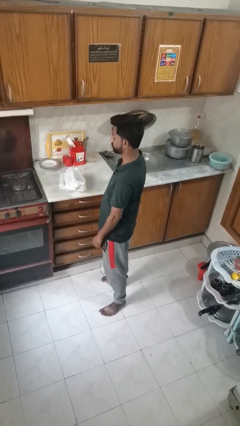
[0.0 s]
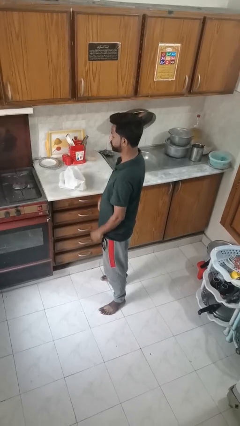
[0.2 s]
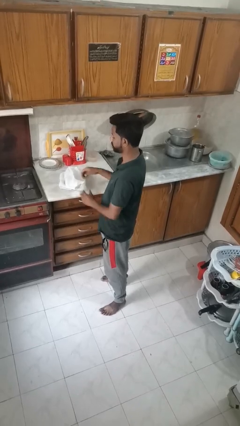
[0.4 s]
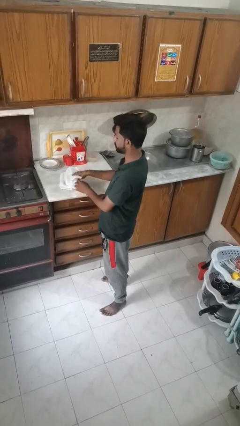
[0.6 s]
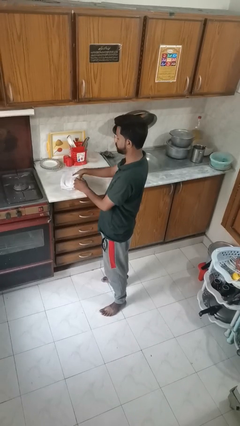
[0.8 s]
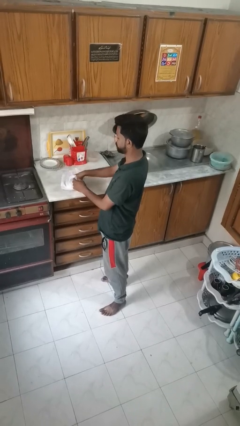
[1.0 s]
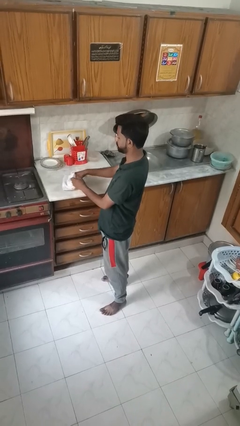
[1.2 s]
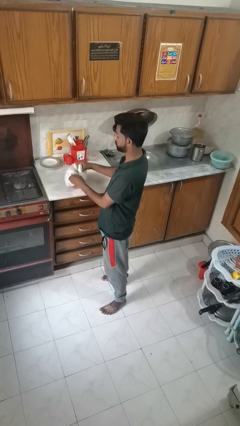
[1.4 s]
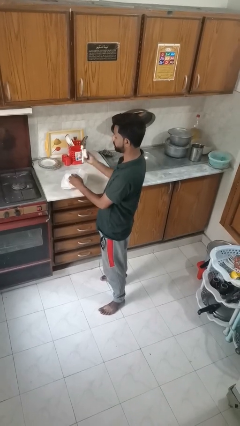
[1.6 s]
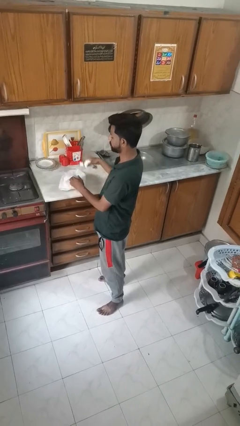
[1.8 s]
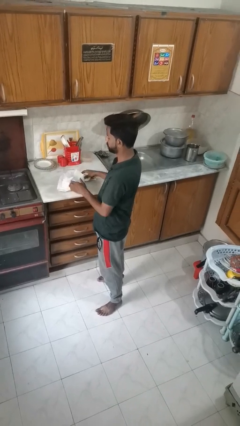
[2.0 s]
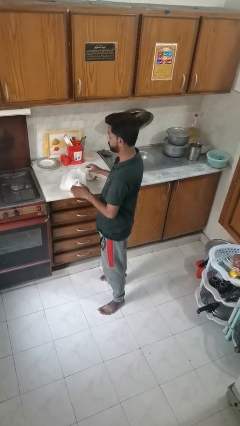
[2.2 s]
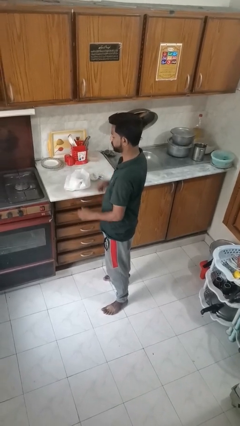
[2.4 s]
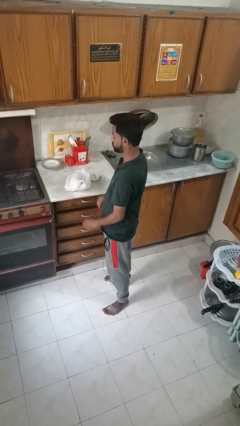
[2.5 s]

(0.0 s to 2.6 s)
person takes object from bag

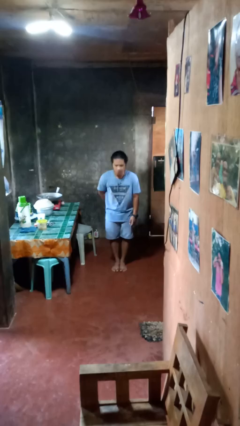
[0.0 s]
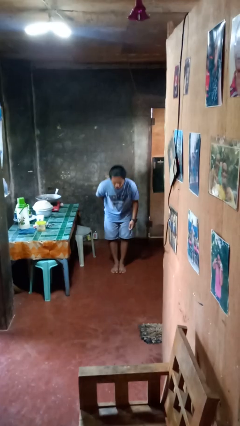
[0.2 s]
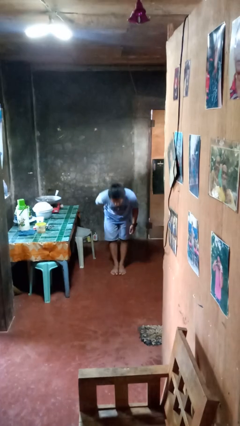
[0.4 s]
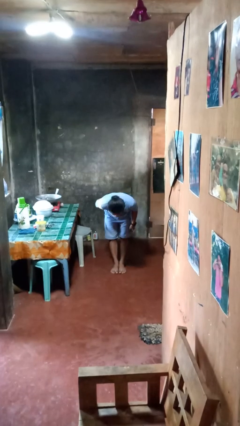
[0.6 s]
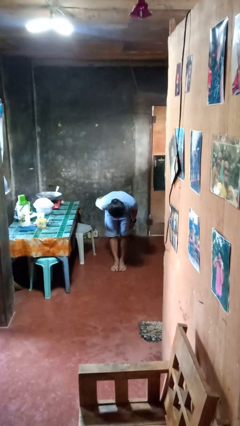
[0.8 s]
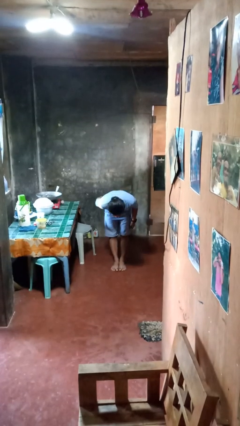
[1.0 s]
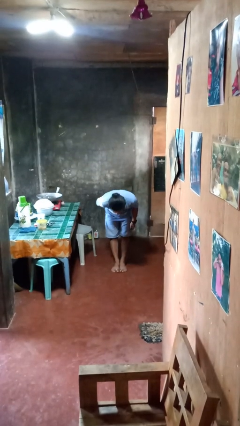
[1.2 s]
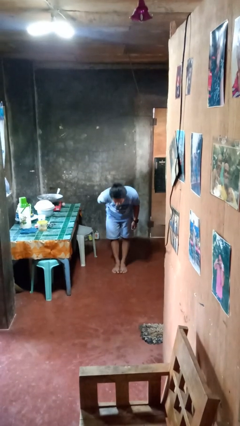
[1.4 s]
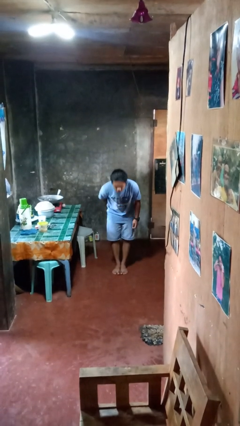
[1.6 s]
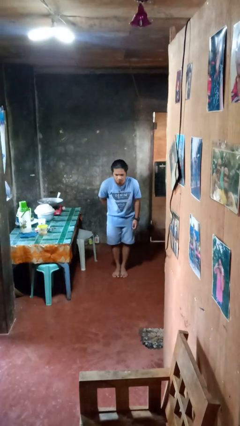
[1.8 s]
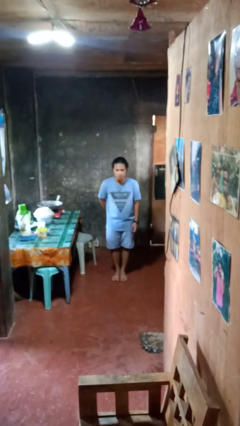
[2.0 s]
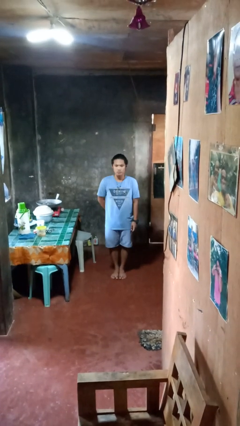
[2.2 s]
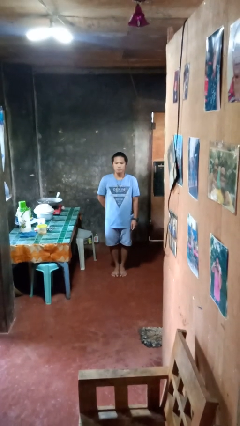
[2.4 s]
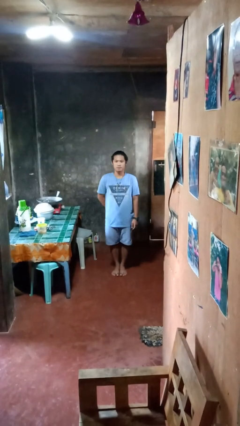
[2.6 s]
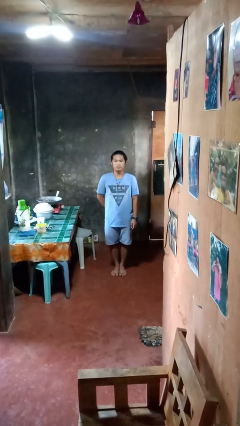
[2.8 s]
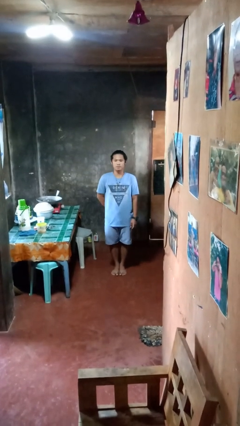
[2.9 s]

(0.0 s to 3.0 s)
person bows

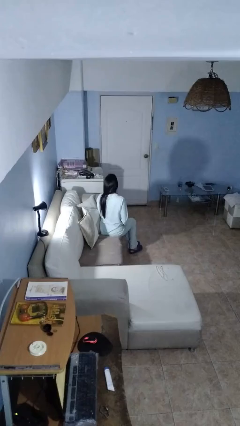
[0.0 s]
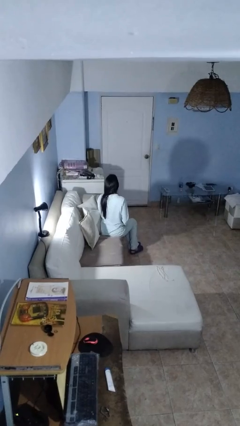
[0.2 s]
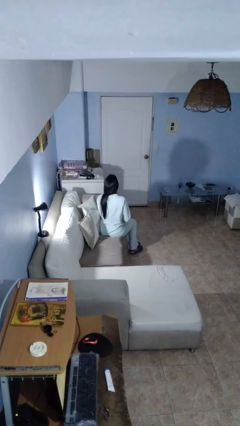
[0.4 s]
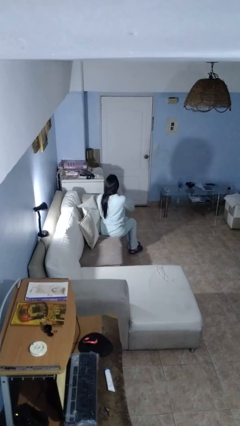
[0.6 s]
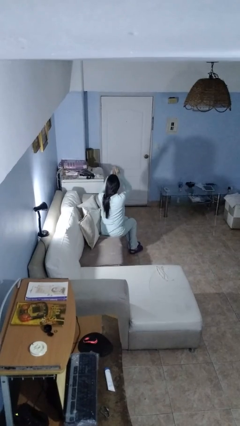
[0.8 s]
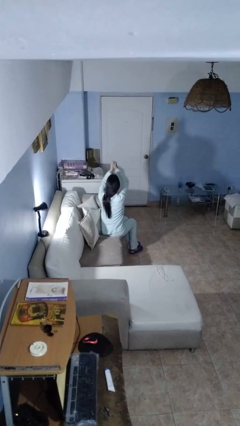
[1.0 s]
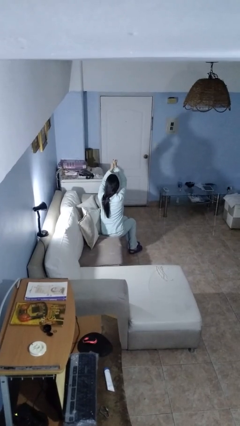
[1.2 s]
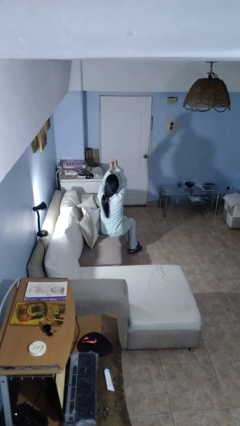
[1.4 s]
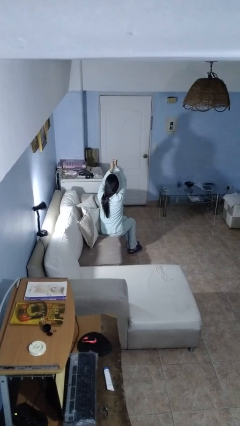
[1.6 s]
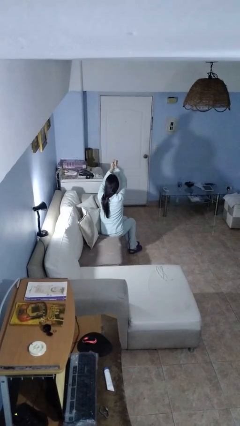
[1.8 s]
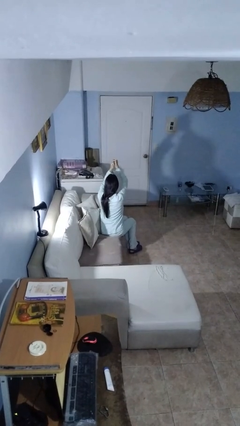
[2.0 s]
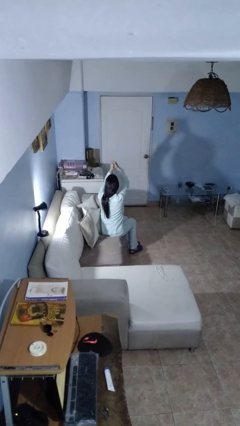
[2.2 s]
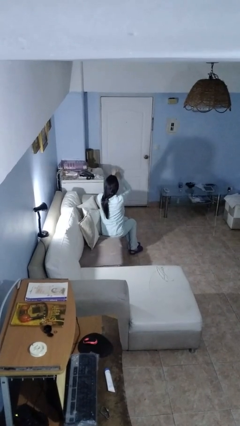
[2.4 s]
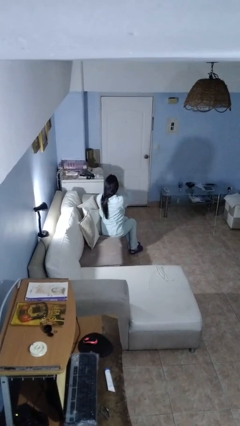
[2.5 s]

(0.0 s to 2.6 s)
person snaps fingers

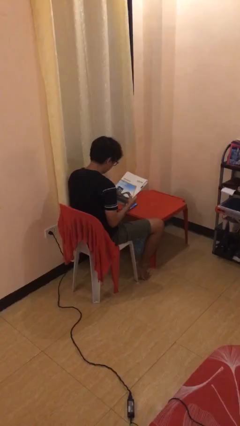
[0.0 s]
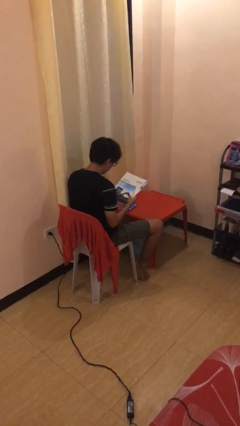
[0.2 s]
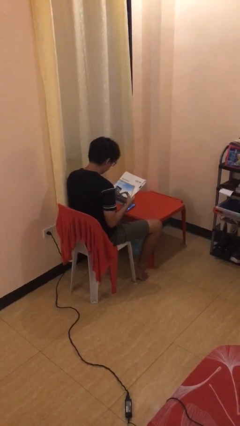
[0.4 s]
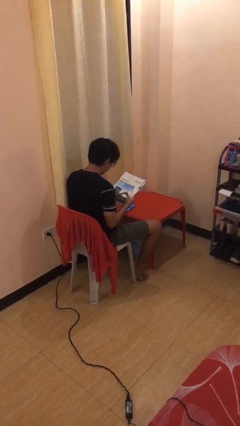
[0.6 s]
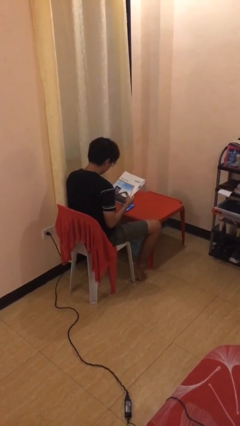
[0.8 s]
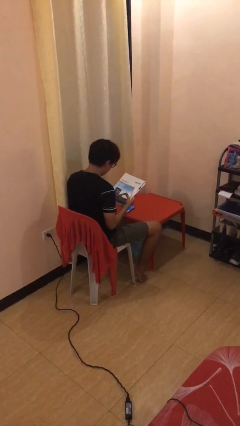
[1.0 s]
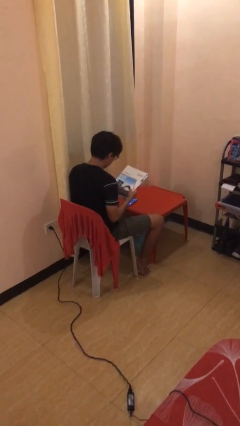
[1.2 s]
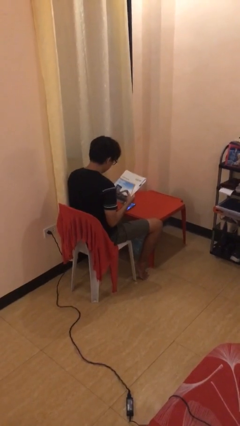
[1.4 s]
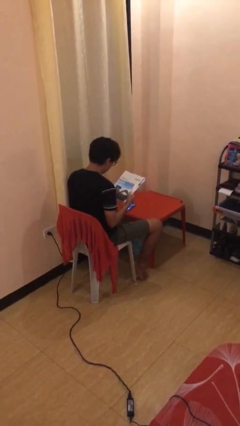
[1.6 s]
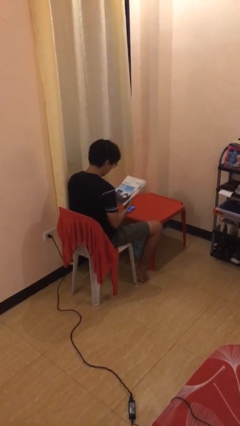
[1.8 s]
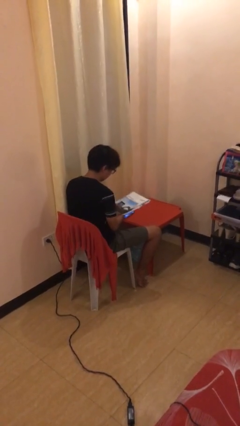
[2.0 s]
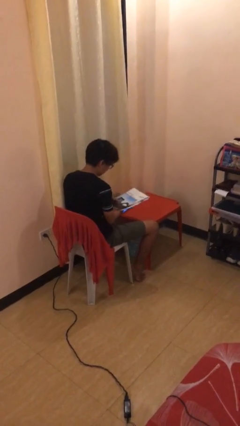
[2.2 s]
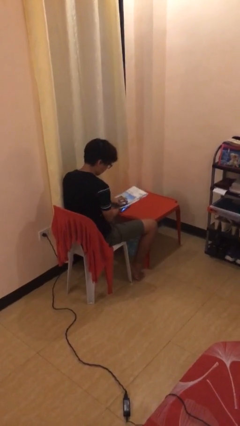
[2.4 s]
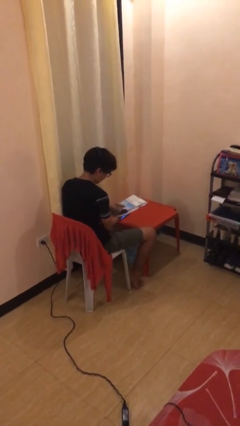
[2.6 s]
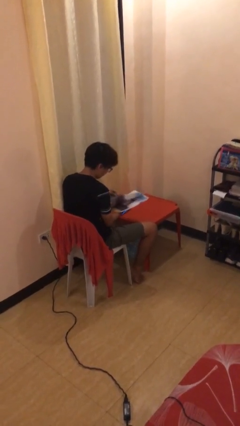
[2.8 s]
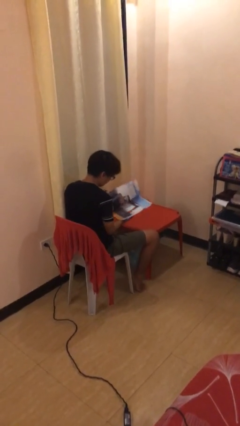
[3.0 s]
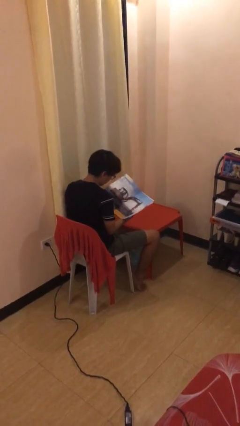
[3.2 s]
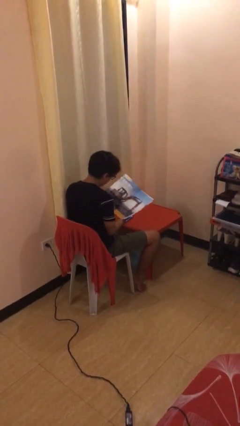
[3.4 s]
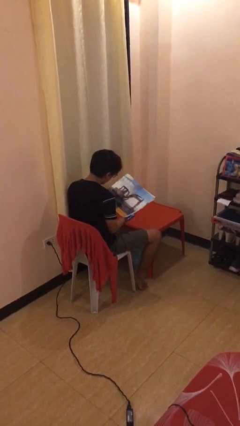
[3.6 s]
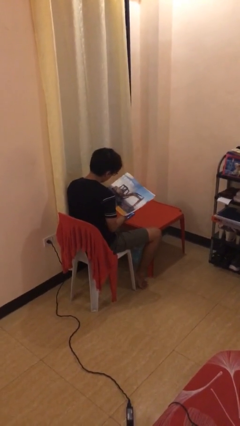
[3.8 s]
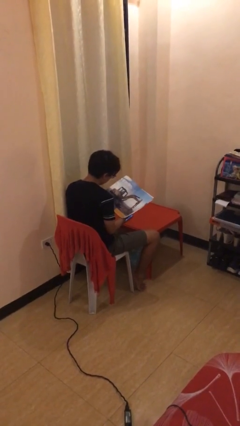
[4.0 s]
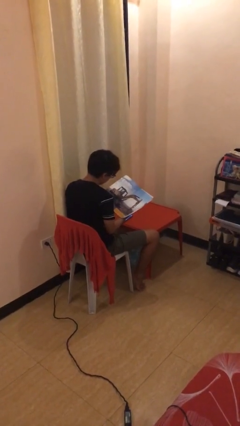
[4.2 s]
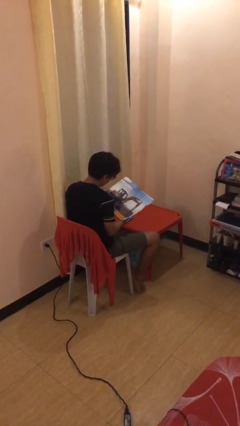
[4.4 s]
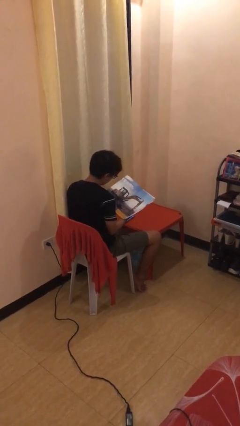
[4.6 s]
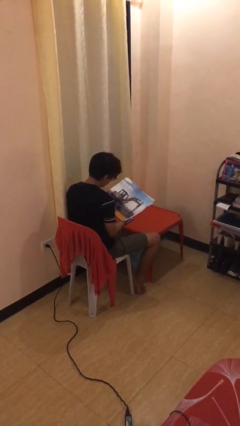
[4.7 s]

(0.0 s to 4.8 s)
person reads document

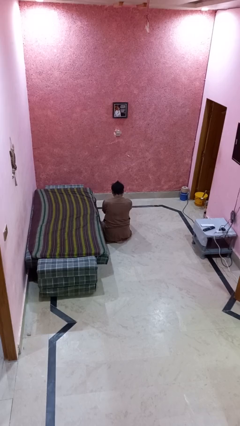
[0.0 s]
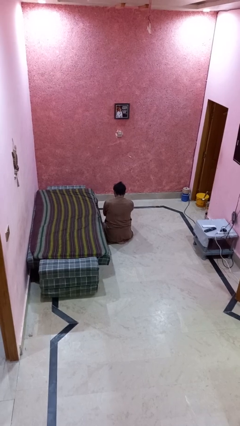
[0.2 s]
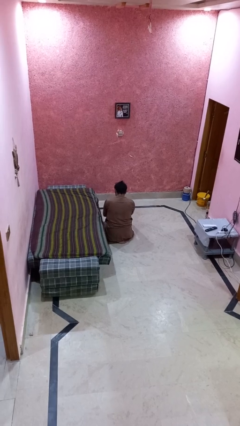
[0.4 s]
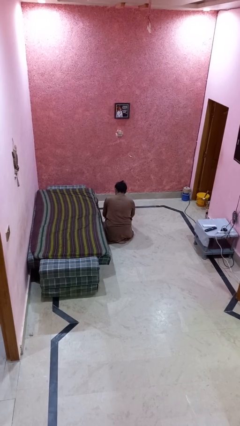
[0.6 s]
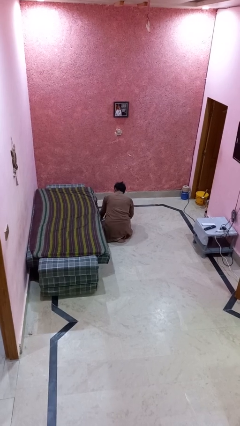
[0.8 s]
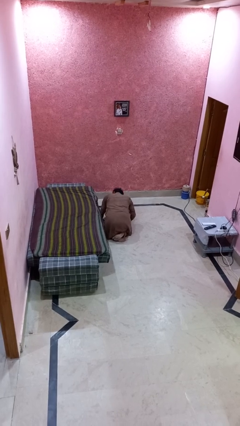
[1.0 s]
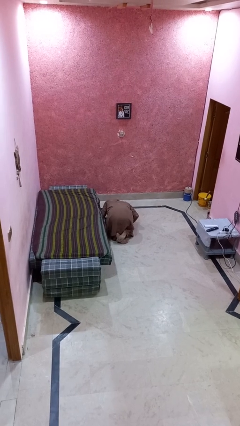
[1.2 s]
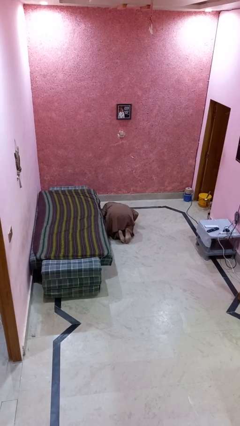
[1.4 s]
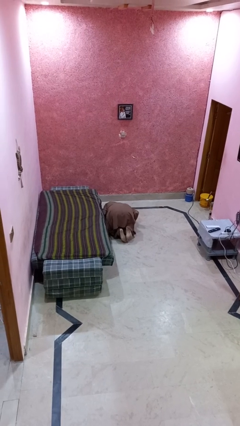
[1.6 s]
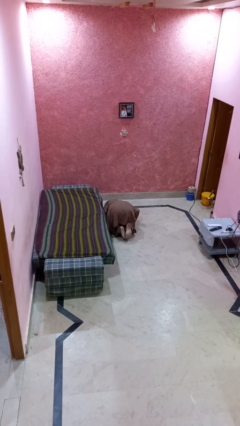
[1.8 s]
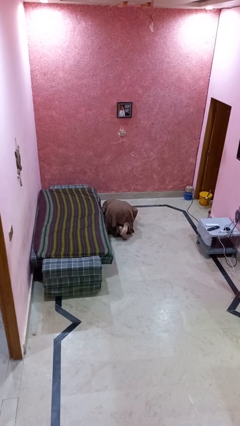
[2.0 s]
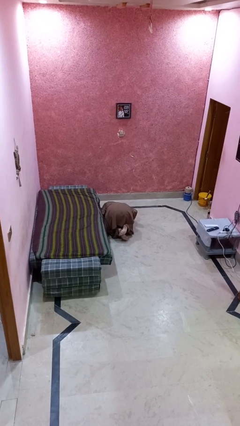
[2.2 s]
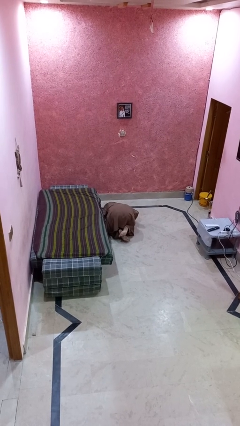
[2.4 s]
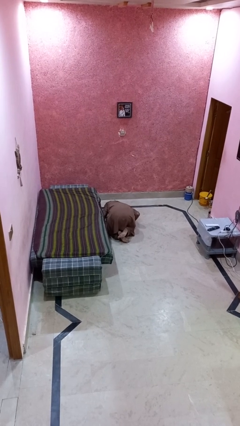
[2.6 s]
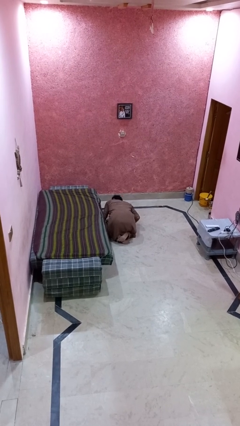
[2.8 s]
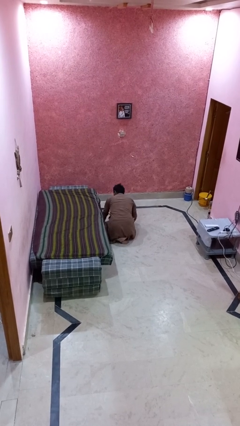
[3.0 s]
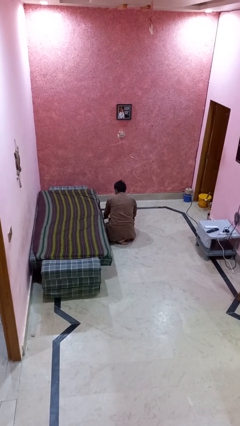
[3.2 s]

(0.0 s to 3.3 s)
person searches under bed

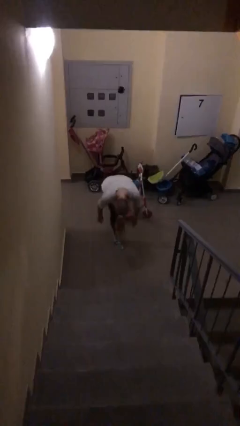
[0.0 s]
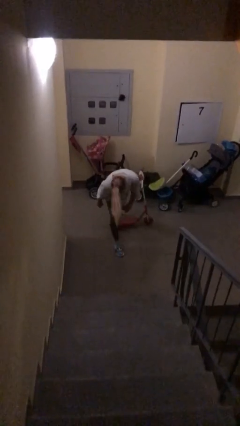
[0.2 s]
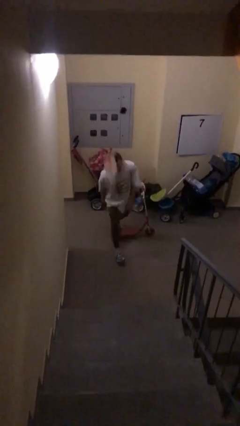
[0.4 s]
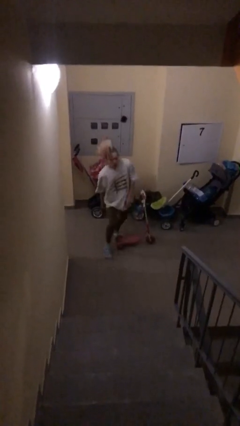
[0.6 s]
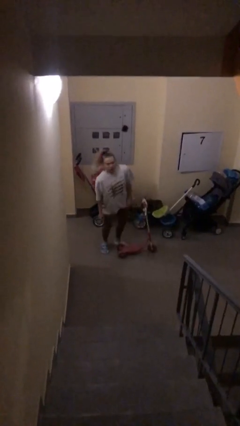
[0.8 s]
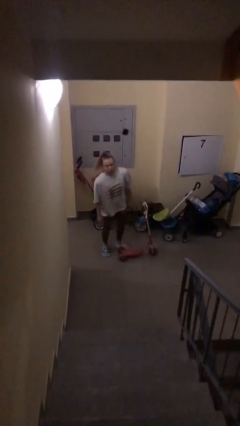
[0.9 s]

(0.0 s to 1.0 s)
person stands up from floor

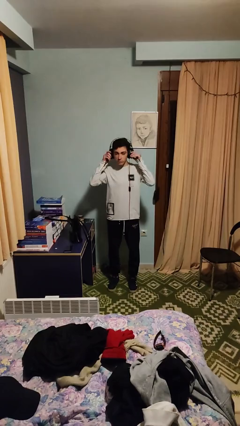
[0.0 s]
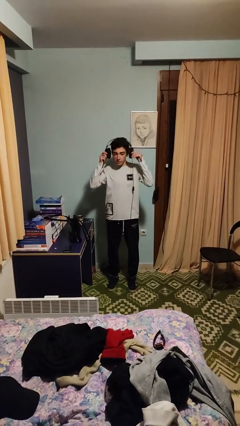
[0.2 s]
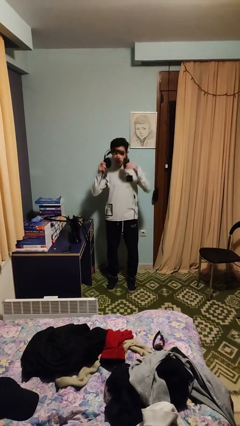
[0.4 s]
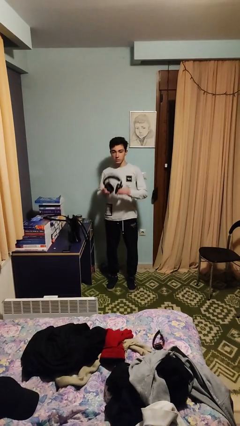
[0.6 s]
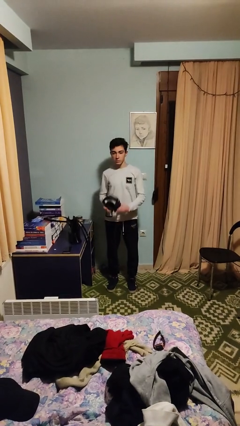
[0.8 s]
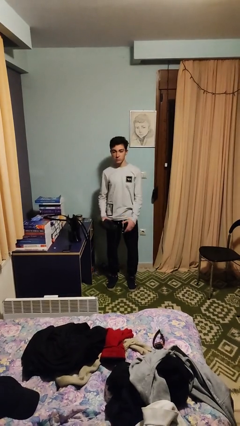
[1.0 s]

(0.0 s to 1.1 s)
person takes off headphones
